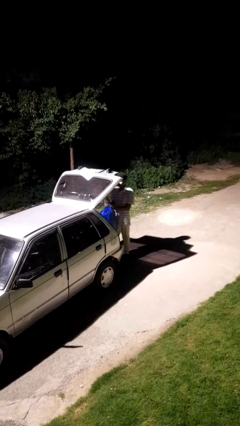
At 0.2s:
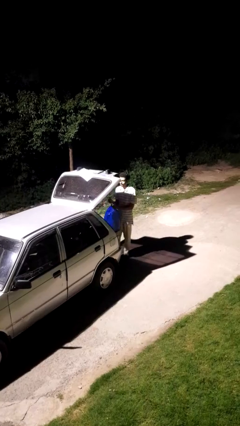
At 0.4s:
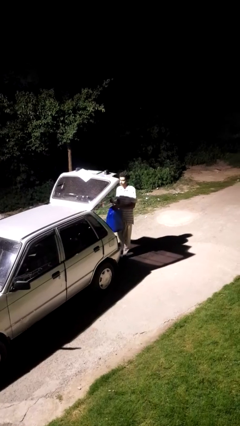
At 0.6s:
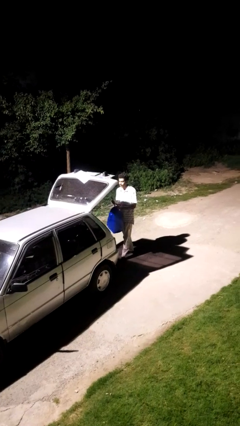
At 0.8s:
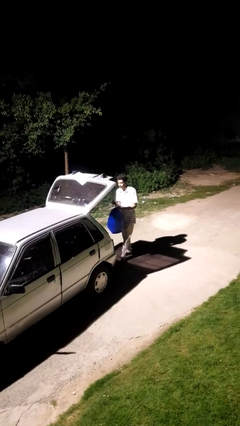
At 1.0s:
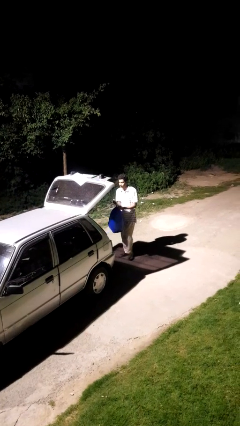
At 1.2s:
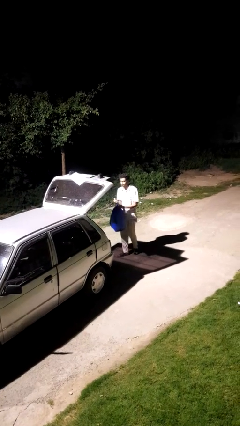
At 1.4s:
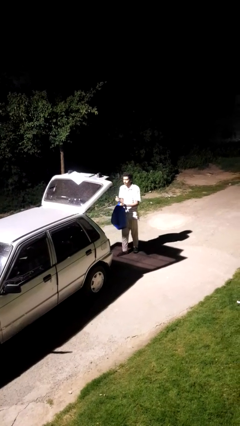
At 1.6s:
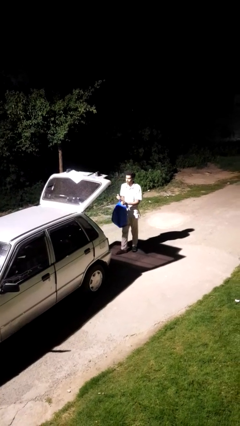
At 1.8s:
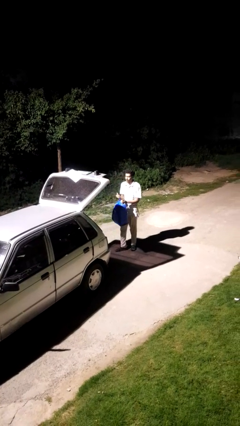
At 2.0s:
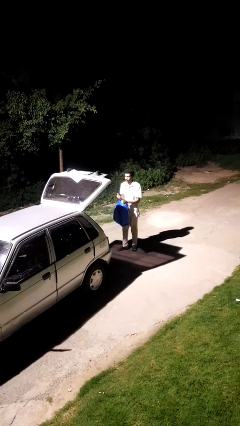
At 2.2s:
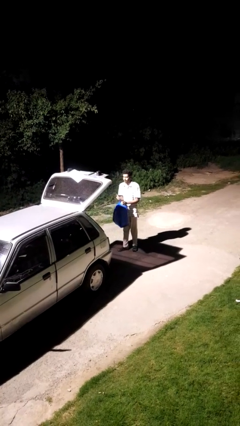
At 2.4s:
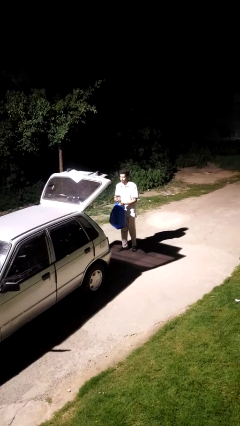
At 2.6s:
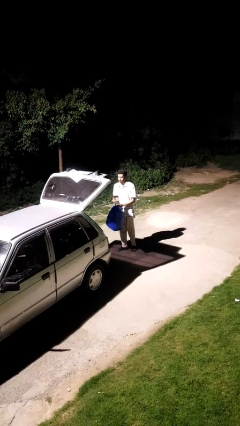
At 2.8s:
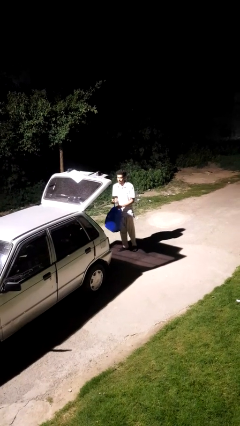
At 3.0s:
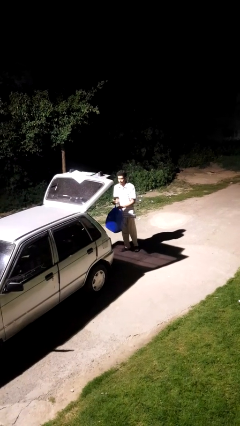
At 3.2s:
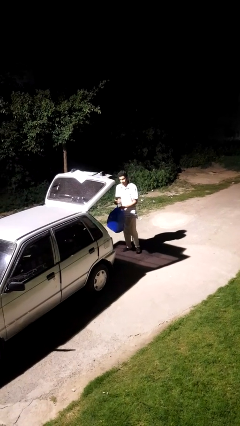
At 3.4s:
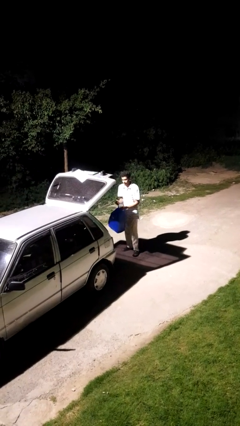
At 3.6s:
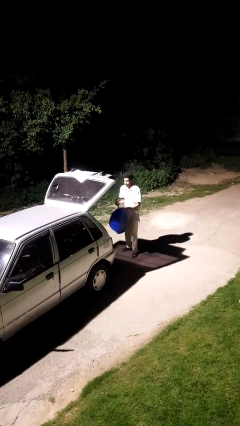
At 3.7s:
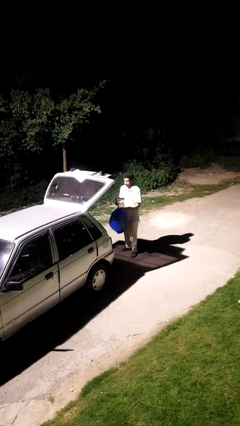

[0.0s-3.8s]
person unloads car

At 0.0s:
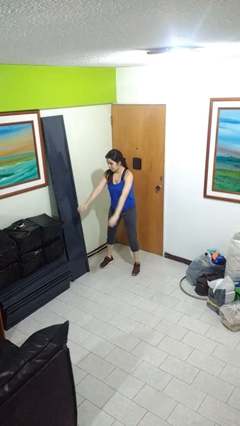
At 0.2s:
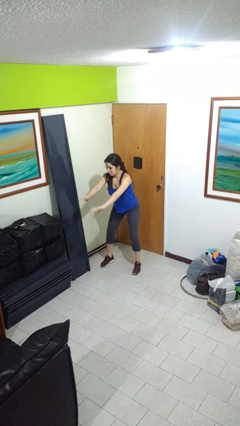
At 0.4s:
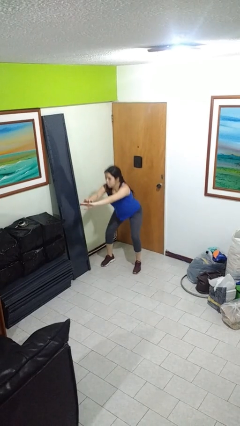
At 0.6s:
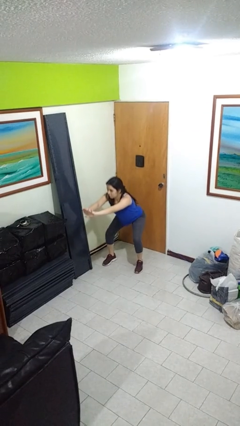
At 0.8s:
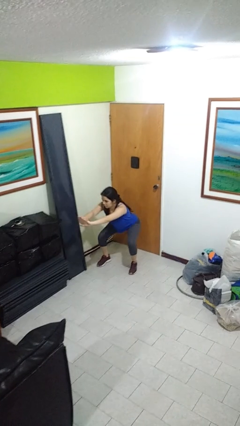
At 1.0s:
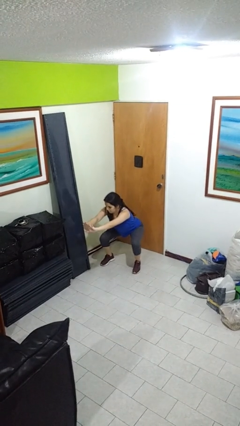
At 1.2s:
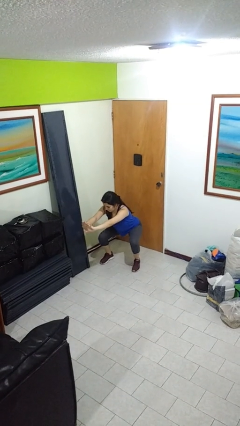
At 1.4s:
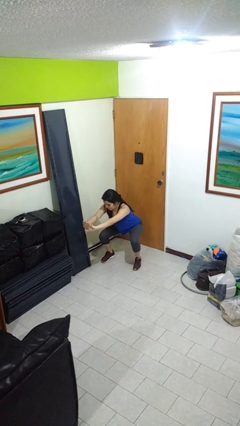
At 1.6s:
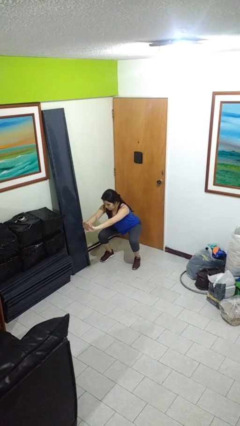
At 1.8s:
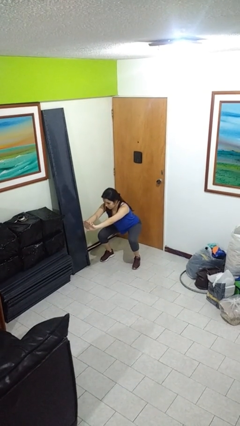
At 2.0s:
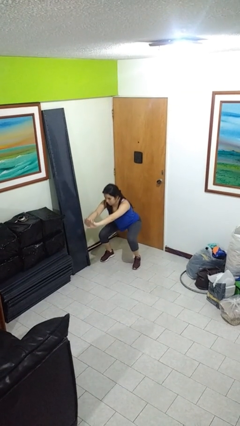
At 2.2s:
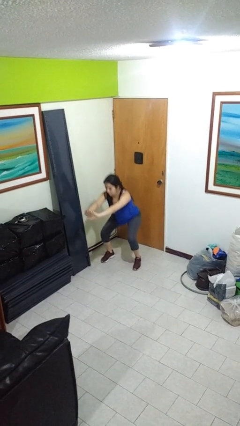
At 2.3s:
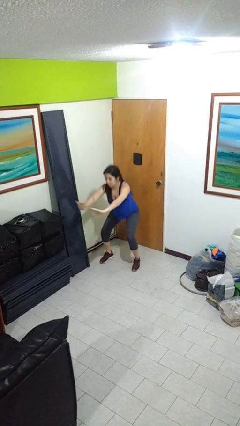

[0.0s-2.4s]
person squats

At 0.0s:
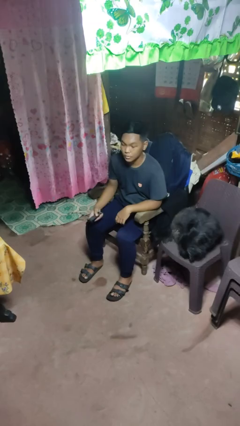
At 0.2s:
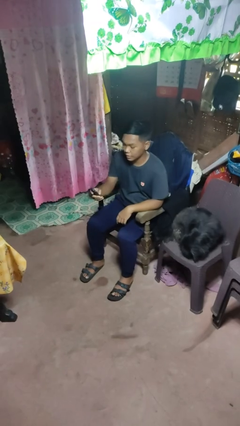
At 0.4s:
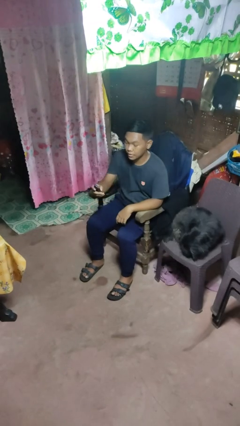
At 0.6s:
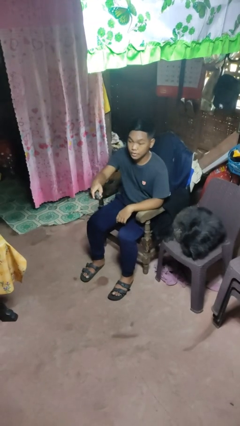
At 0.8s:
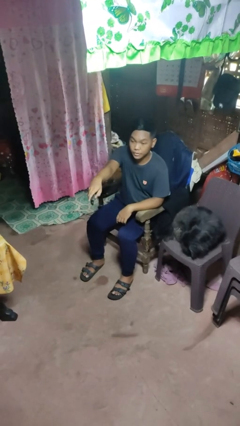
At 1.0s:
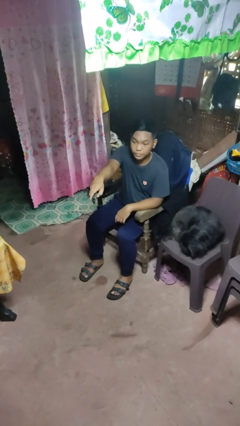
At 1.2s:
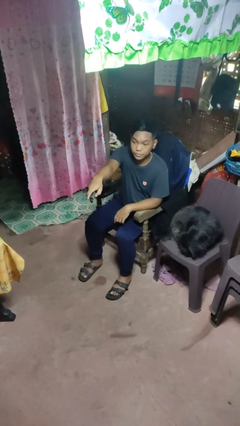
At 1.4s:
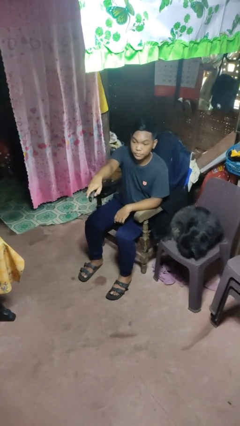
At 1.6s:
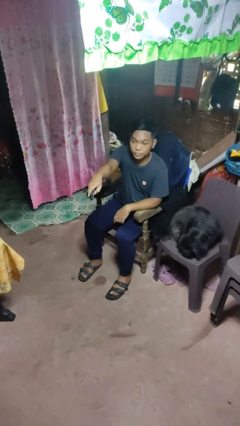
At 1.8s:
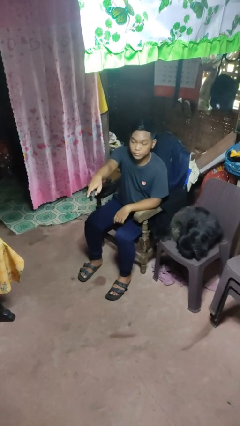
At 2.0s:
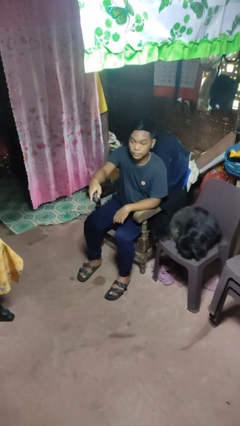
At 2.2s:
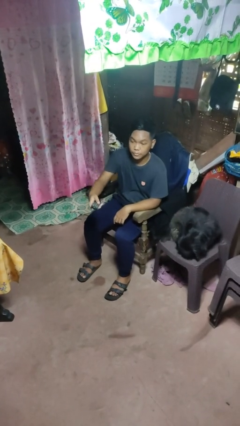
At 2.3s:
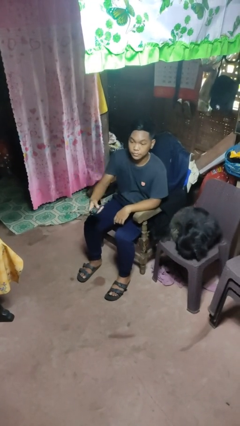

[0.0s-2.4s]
person uses television remote

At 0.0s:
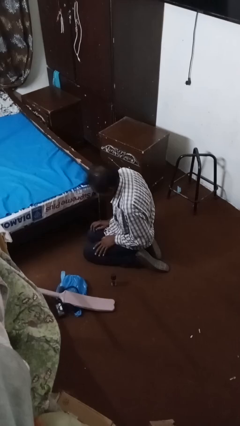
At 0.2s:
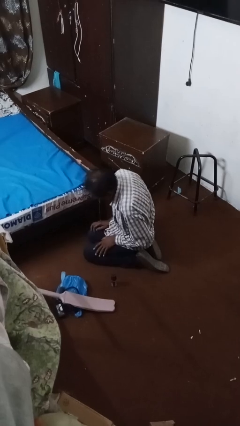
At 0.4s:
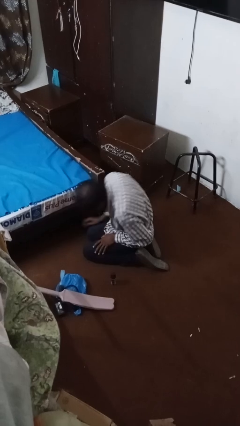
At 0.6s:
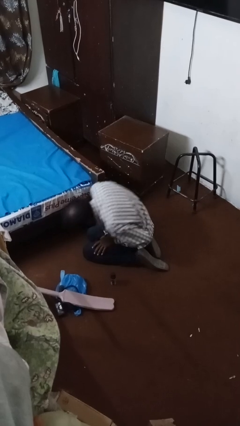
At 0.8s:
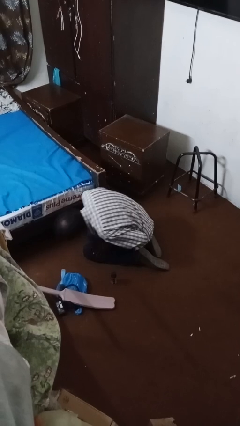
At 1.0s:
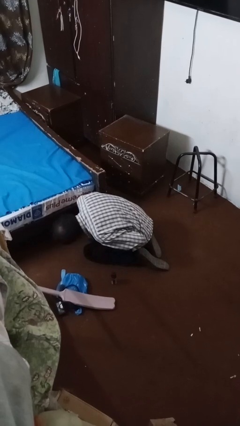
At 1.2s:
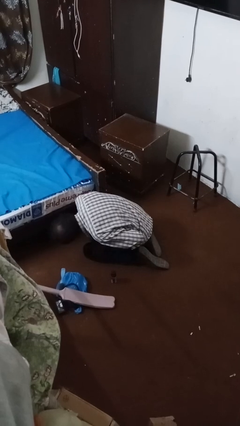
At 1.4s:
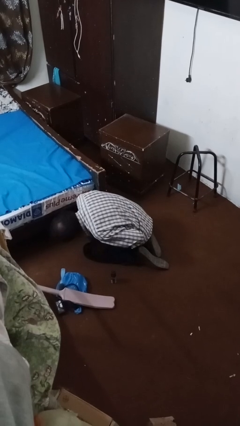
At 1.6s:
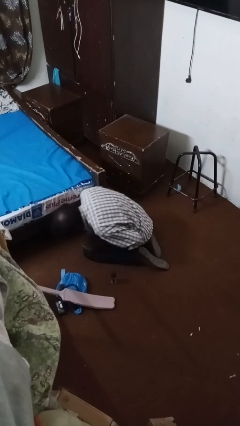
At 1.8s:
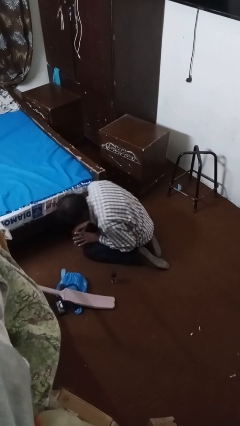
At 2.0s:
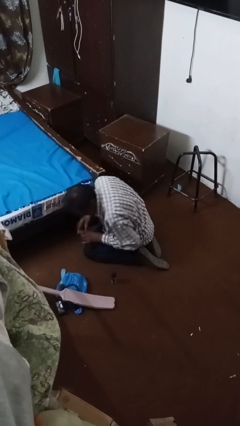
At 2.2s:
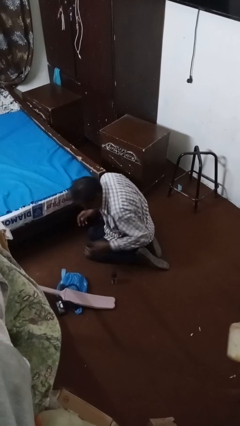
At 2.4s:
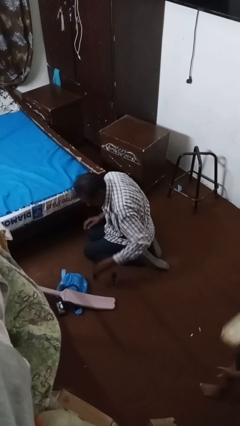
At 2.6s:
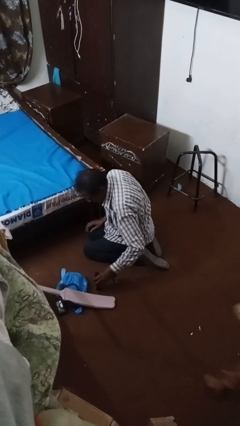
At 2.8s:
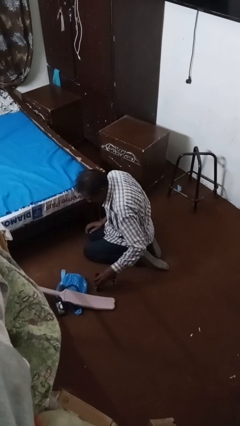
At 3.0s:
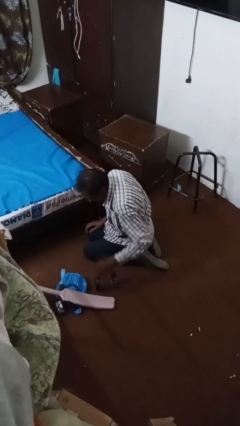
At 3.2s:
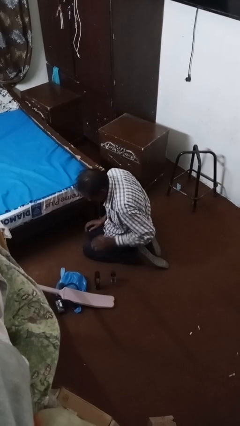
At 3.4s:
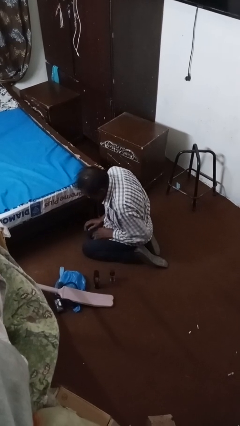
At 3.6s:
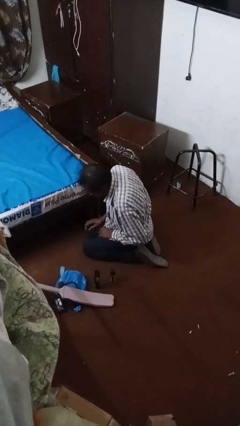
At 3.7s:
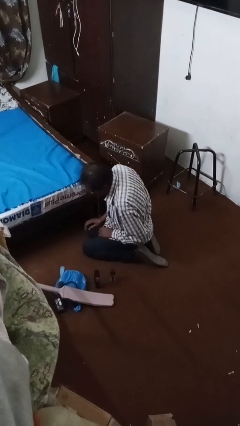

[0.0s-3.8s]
person searches under bed

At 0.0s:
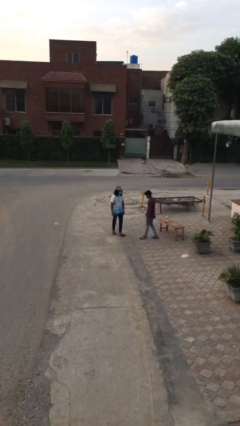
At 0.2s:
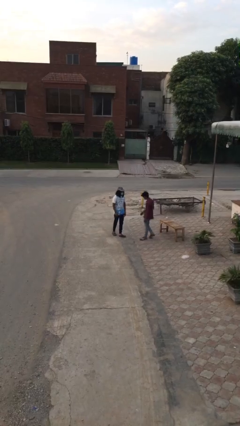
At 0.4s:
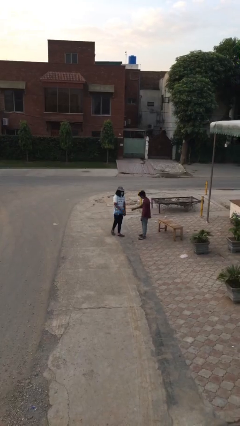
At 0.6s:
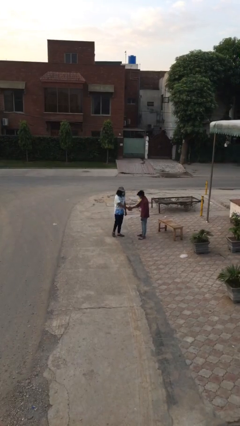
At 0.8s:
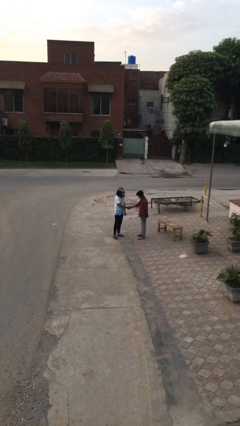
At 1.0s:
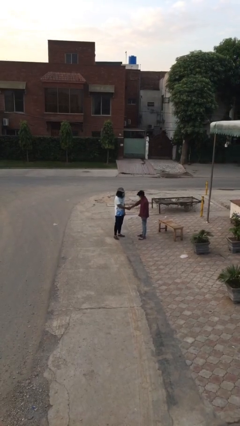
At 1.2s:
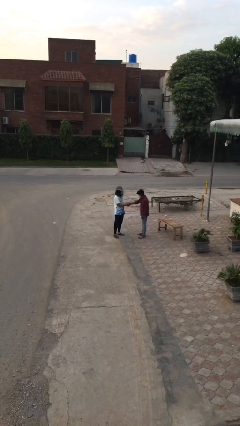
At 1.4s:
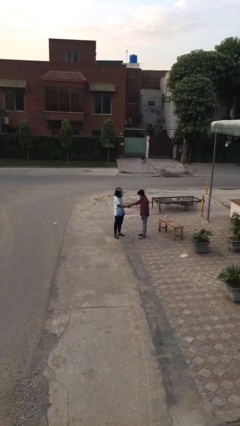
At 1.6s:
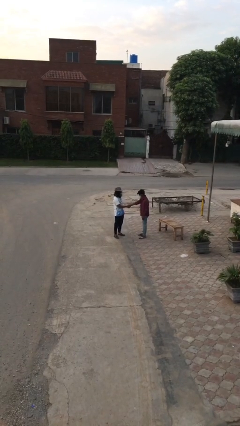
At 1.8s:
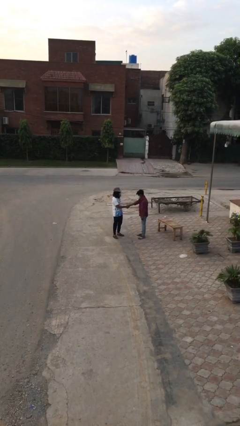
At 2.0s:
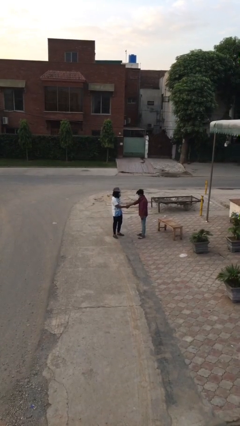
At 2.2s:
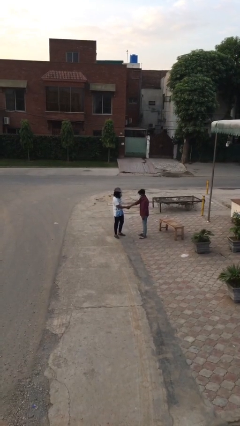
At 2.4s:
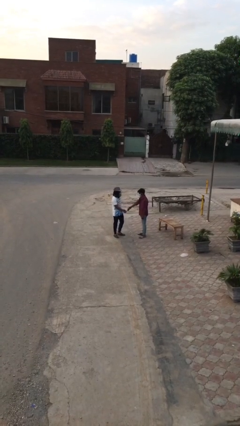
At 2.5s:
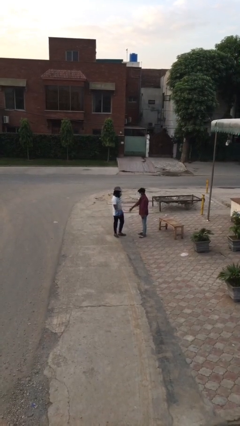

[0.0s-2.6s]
person shakes hand

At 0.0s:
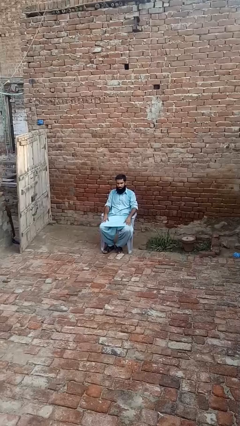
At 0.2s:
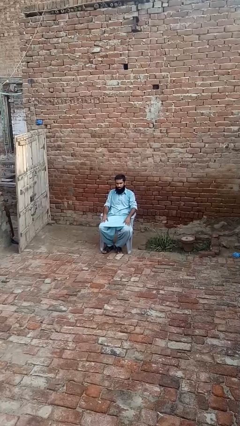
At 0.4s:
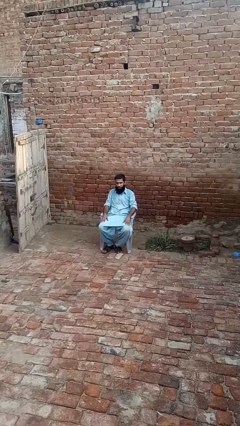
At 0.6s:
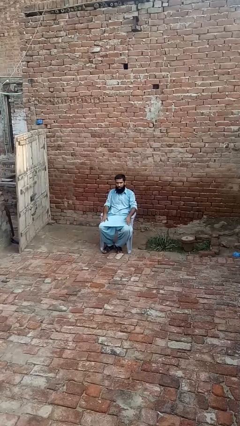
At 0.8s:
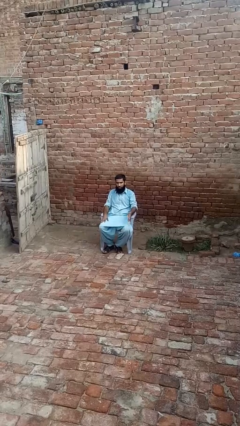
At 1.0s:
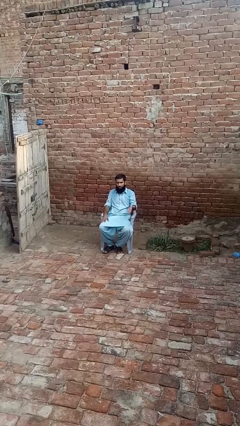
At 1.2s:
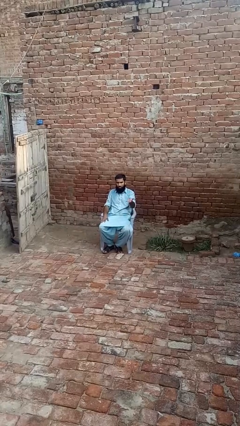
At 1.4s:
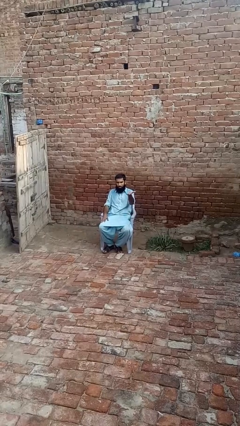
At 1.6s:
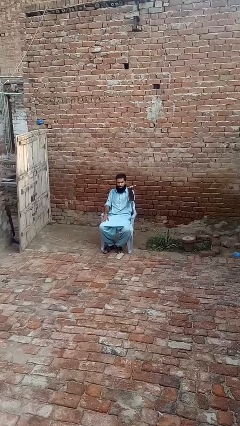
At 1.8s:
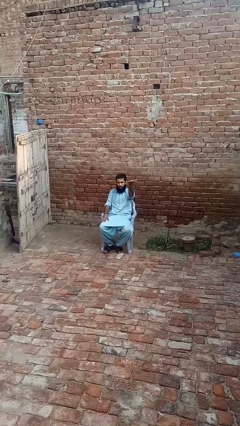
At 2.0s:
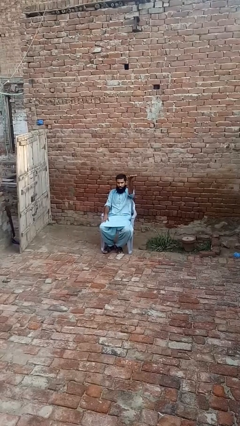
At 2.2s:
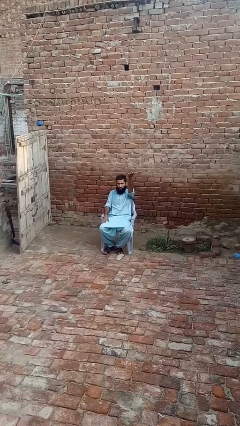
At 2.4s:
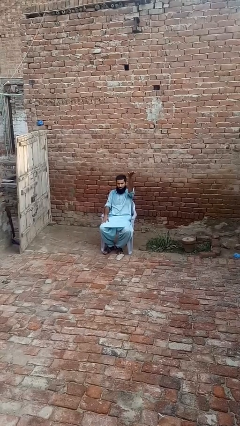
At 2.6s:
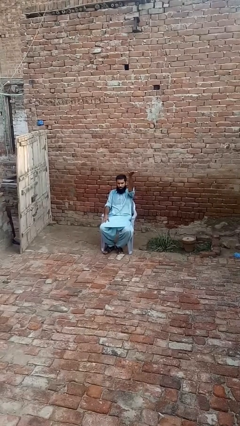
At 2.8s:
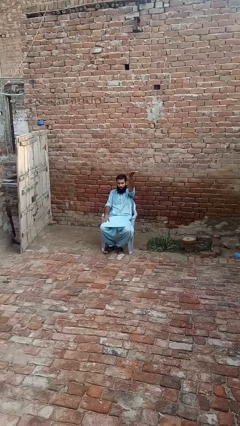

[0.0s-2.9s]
person gestures swipe up
